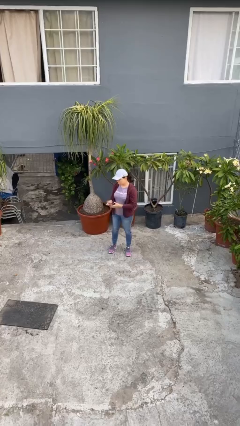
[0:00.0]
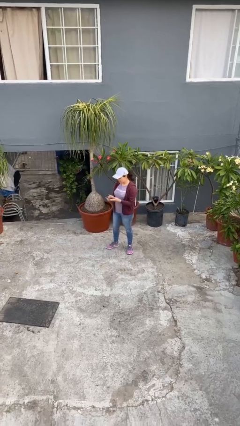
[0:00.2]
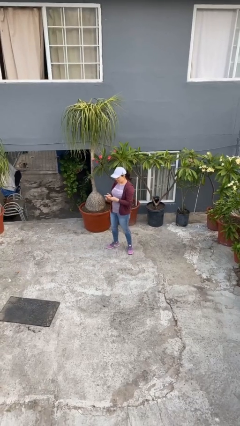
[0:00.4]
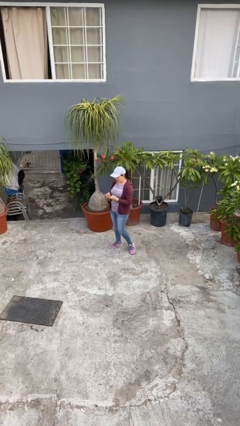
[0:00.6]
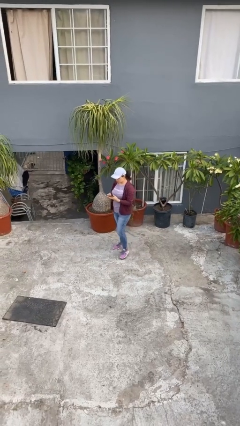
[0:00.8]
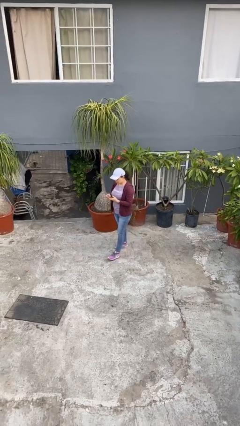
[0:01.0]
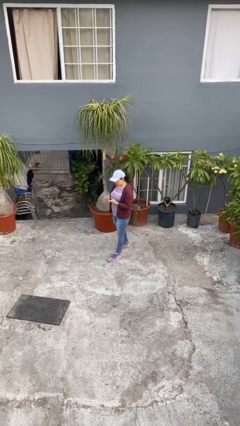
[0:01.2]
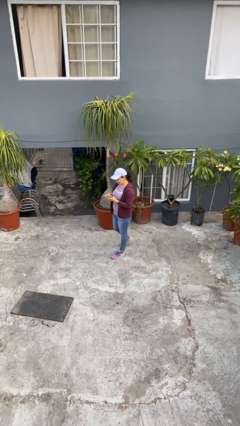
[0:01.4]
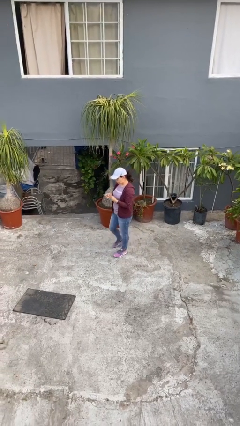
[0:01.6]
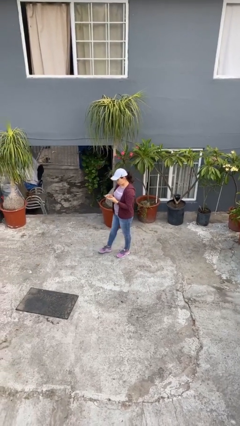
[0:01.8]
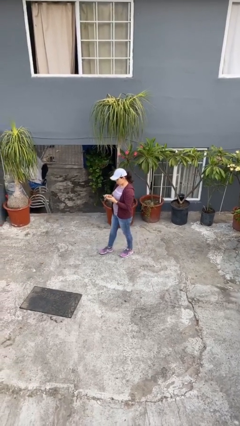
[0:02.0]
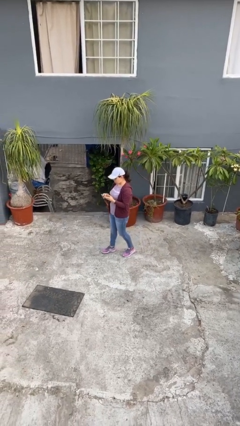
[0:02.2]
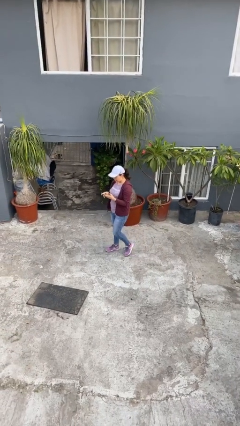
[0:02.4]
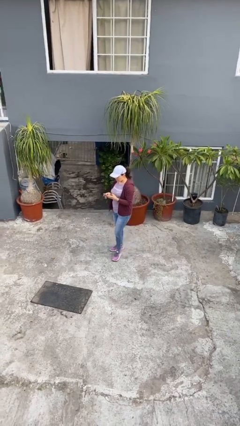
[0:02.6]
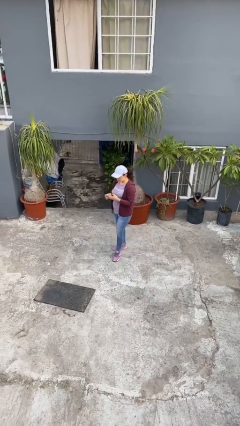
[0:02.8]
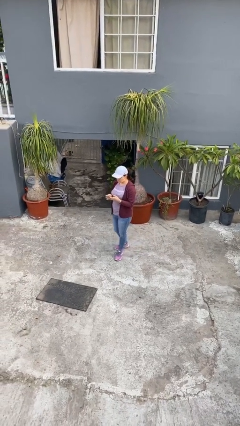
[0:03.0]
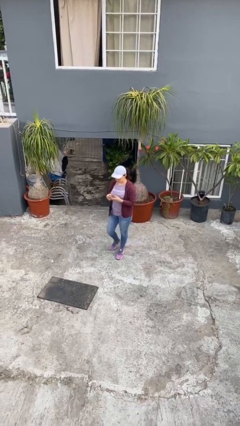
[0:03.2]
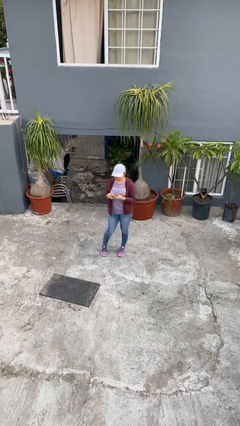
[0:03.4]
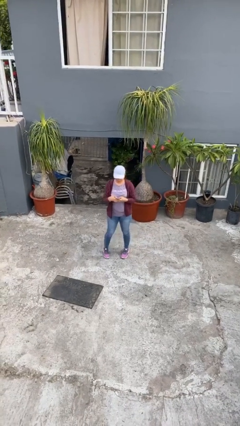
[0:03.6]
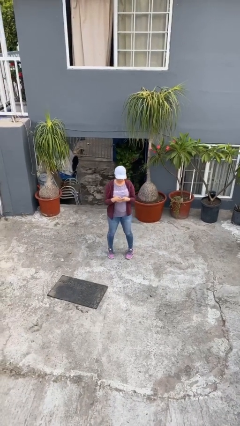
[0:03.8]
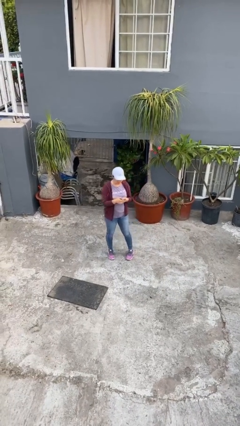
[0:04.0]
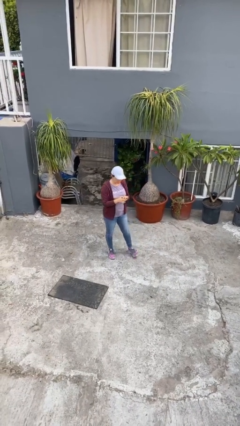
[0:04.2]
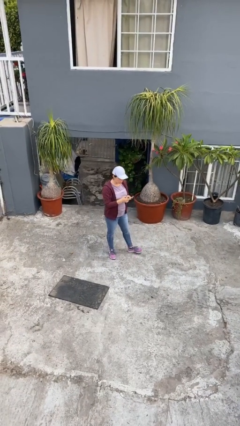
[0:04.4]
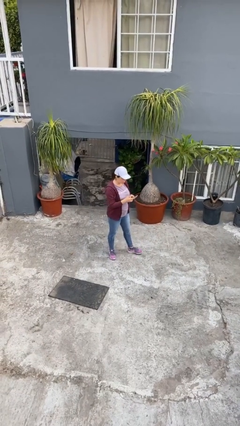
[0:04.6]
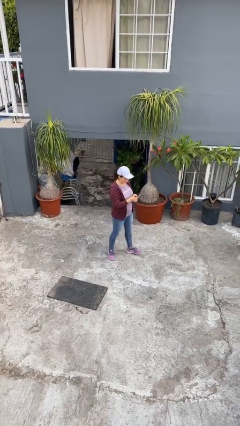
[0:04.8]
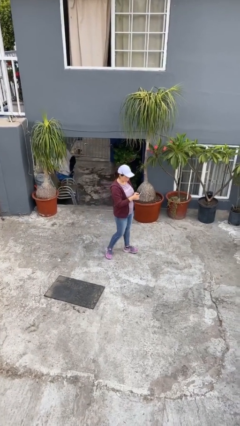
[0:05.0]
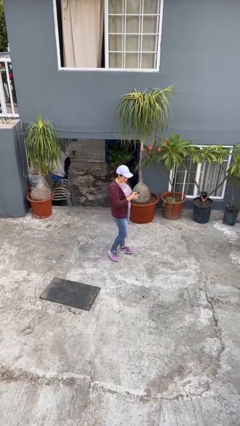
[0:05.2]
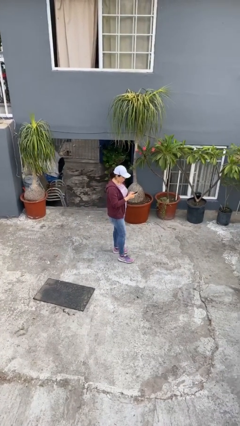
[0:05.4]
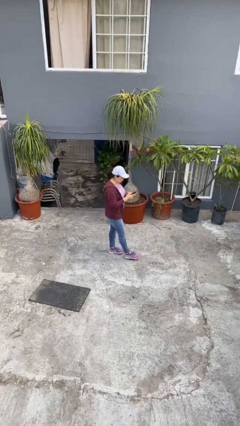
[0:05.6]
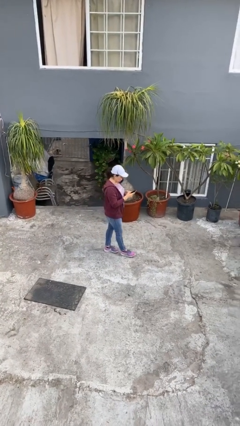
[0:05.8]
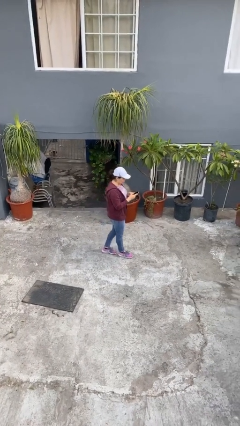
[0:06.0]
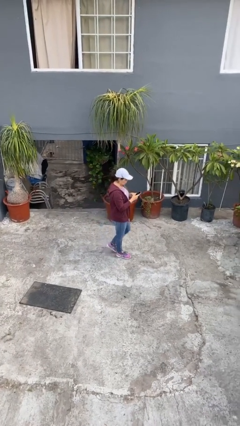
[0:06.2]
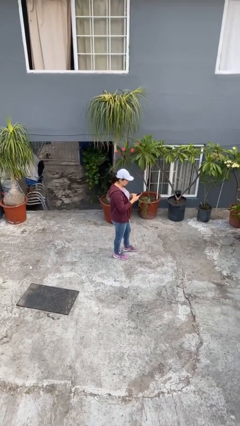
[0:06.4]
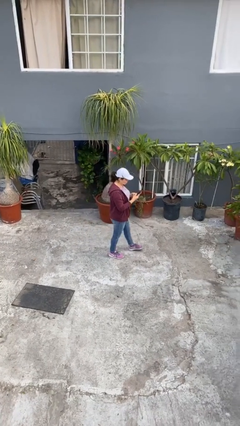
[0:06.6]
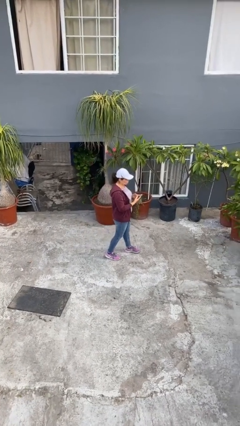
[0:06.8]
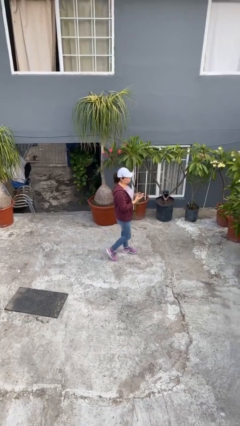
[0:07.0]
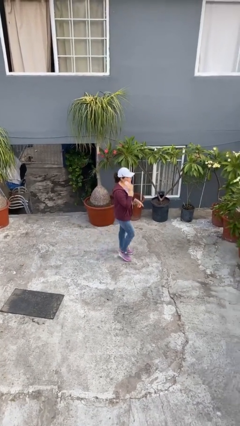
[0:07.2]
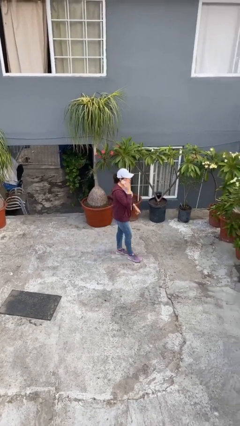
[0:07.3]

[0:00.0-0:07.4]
person texts on phone

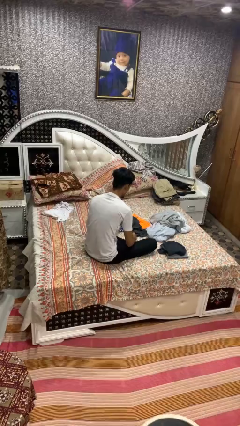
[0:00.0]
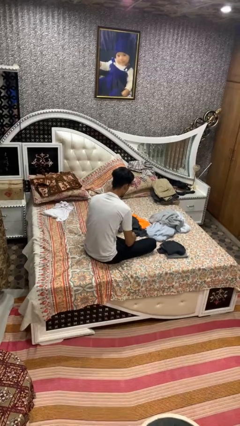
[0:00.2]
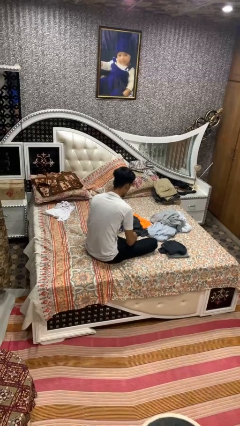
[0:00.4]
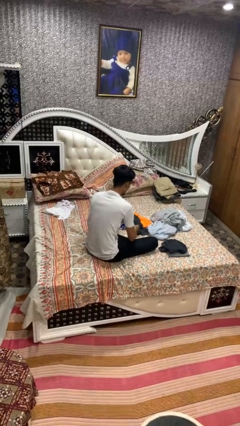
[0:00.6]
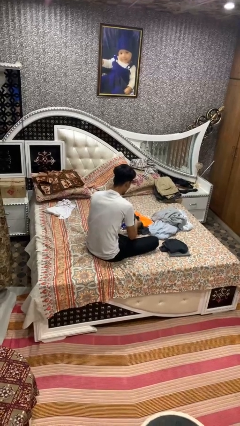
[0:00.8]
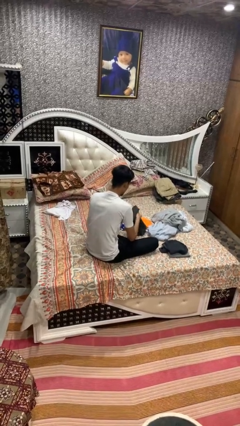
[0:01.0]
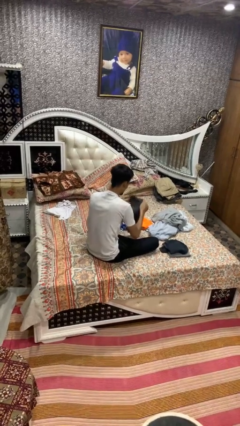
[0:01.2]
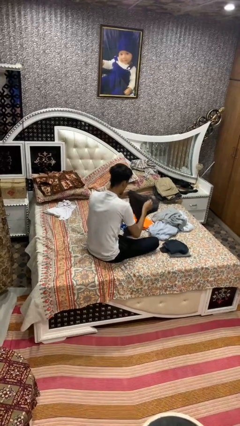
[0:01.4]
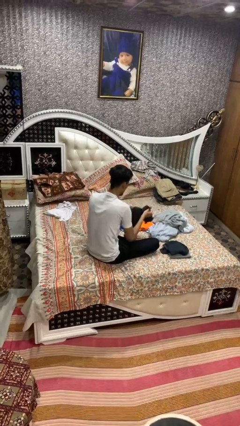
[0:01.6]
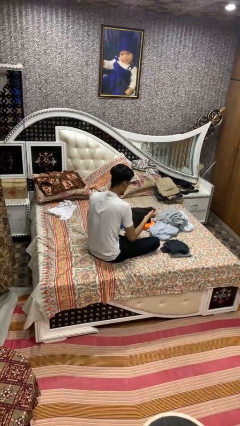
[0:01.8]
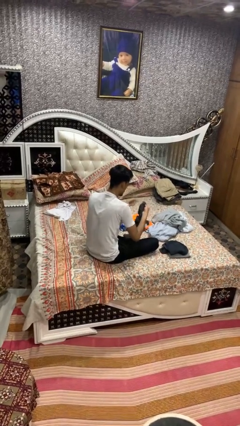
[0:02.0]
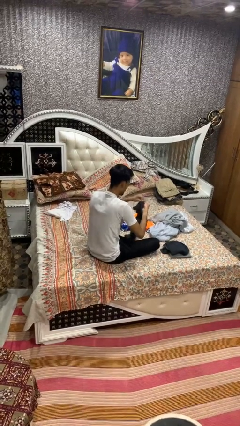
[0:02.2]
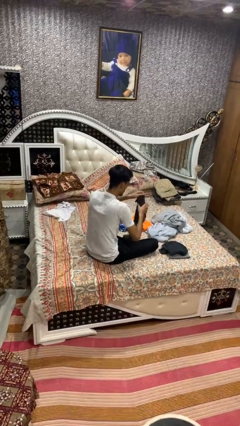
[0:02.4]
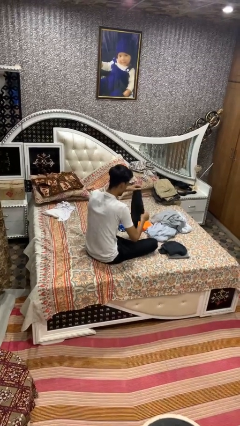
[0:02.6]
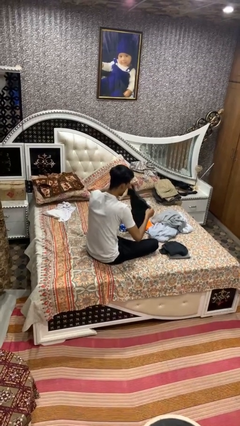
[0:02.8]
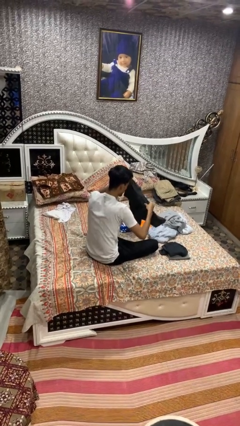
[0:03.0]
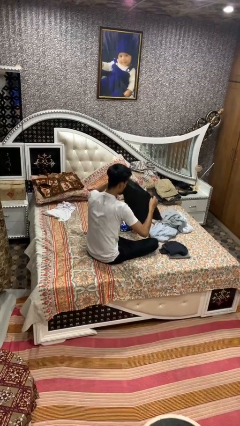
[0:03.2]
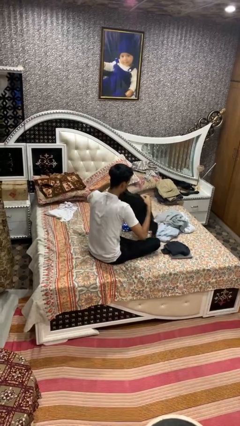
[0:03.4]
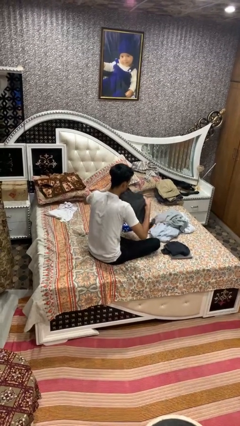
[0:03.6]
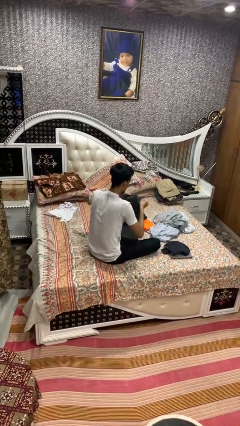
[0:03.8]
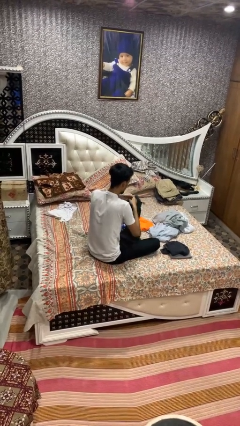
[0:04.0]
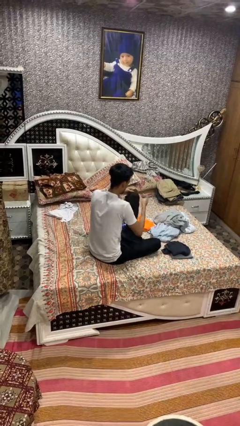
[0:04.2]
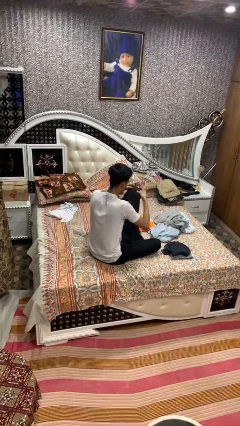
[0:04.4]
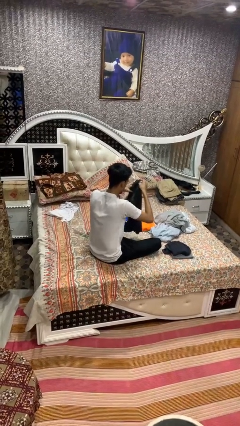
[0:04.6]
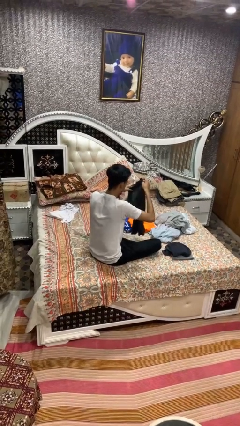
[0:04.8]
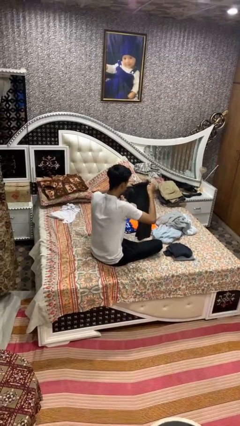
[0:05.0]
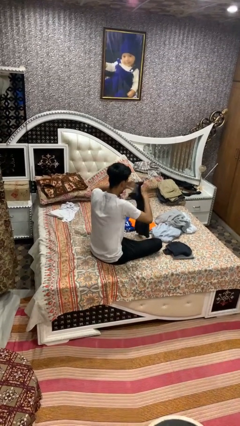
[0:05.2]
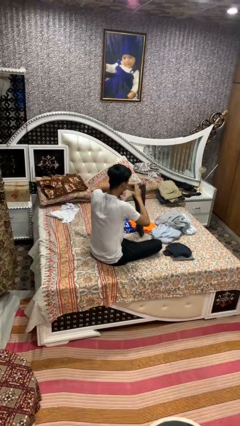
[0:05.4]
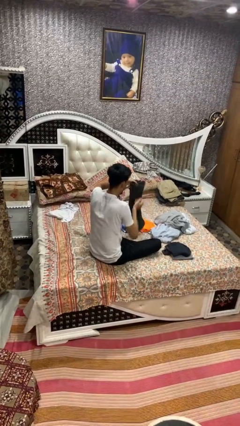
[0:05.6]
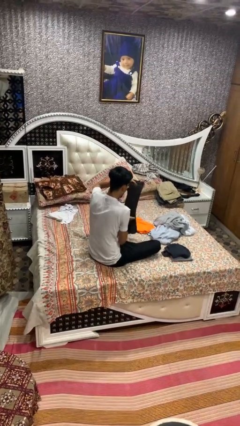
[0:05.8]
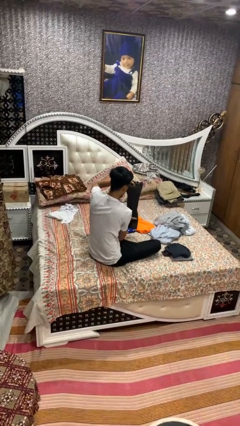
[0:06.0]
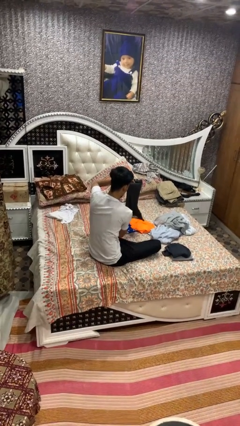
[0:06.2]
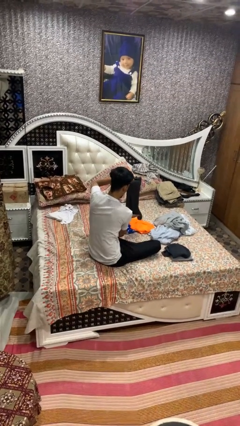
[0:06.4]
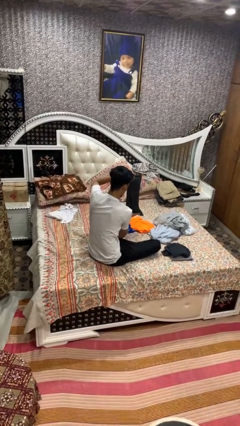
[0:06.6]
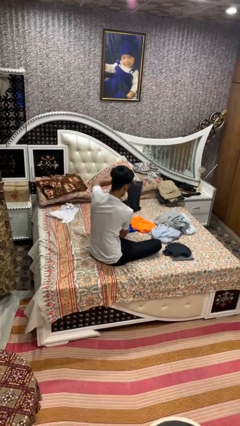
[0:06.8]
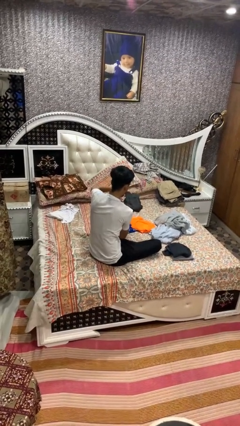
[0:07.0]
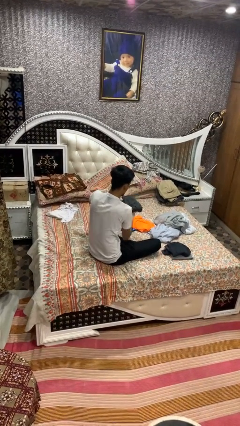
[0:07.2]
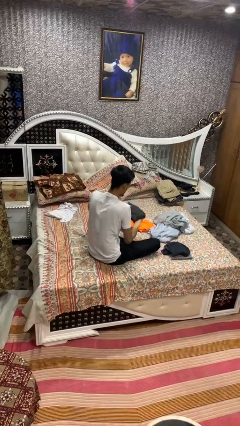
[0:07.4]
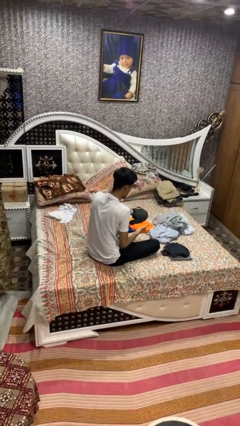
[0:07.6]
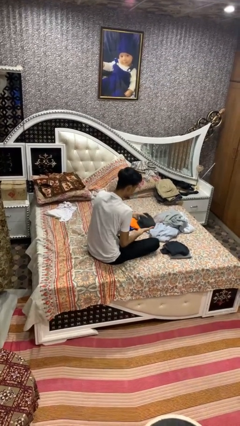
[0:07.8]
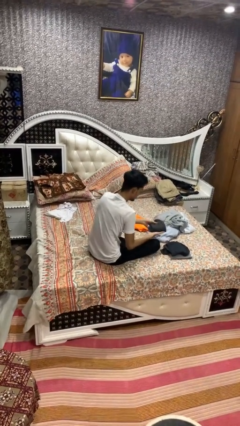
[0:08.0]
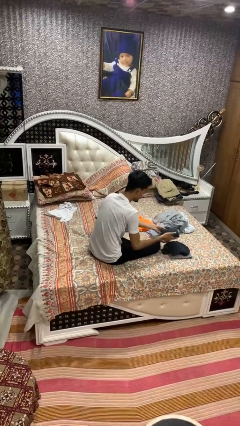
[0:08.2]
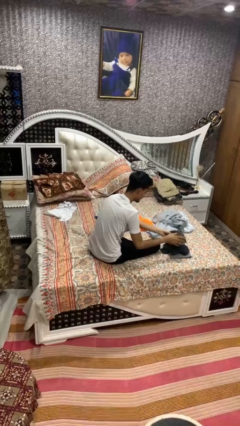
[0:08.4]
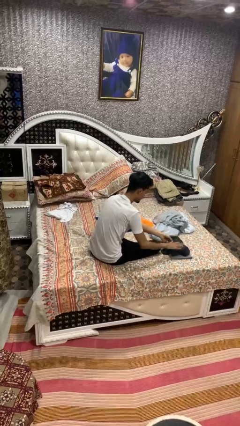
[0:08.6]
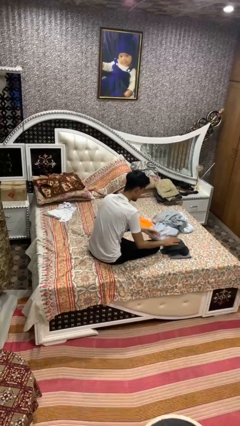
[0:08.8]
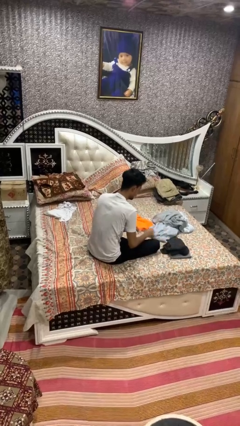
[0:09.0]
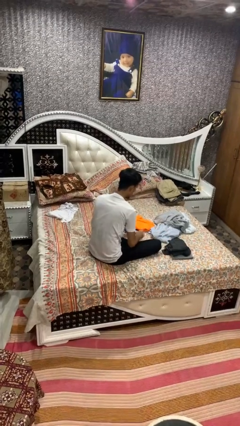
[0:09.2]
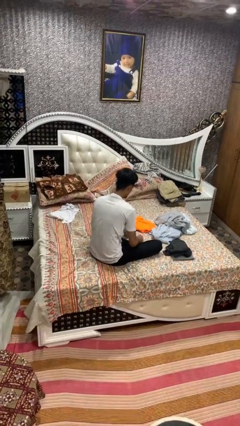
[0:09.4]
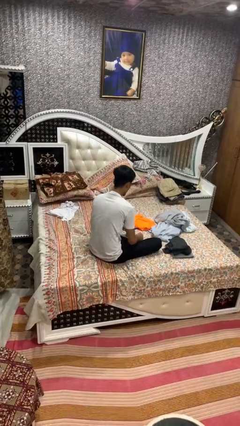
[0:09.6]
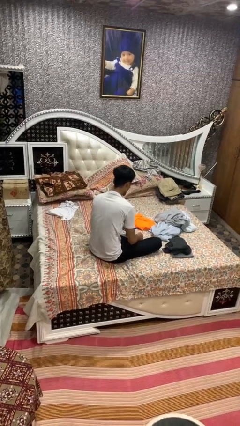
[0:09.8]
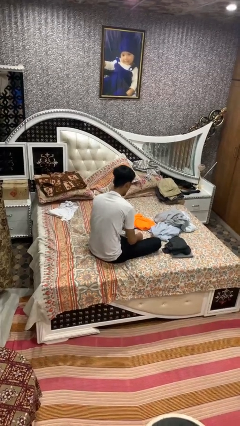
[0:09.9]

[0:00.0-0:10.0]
person folds shirt

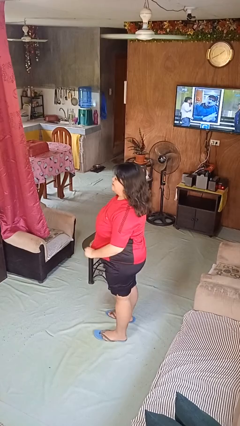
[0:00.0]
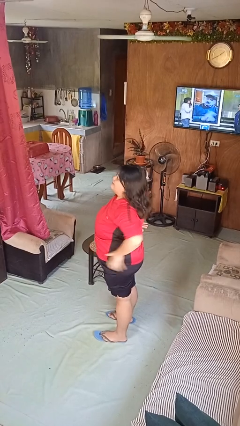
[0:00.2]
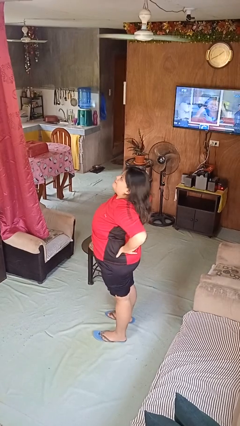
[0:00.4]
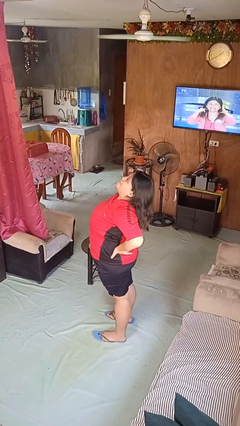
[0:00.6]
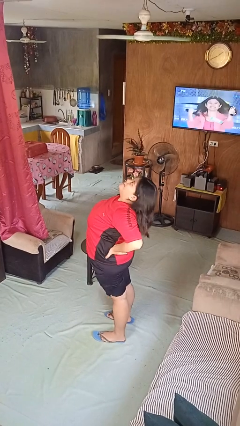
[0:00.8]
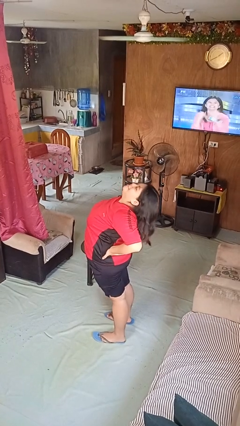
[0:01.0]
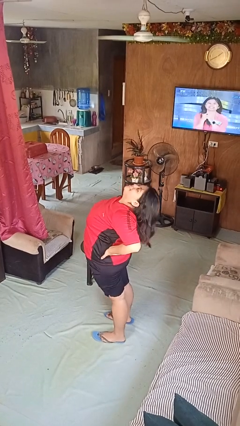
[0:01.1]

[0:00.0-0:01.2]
person stretches back
